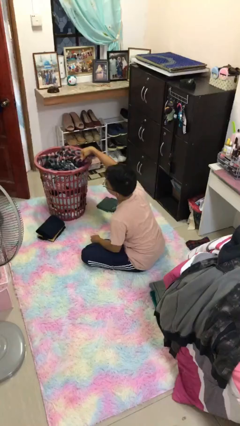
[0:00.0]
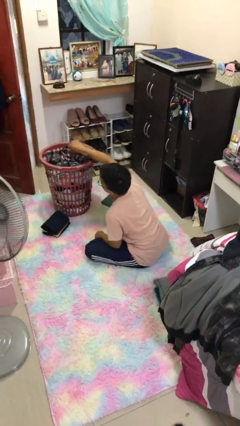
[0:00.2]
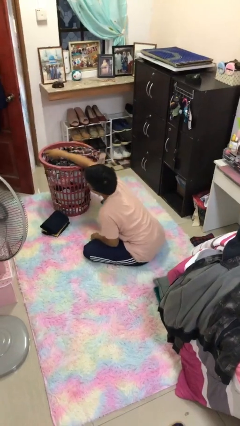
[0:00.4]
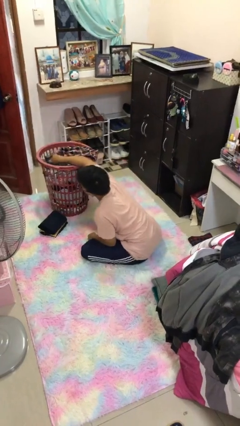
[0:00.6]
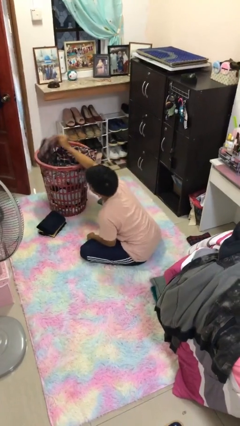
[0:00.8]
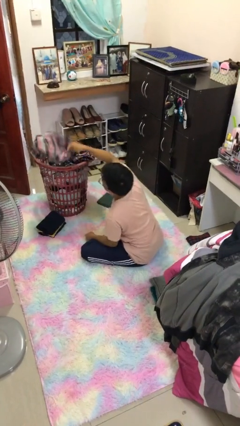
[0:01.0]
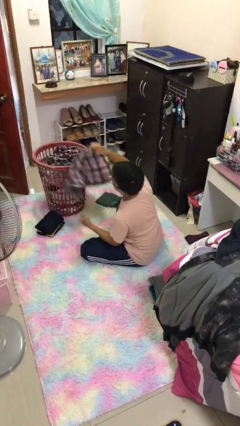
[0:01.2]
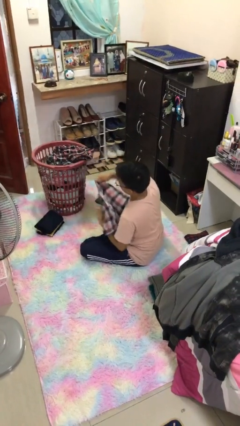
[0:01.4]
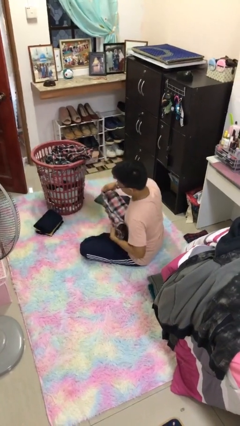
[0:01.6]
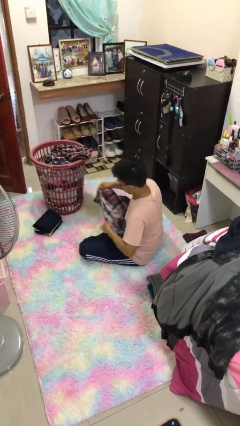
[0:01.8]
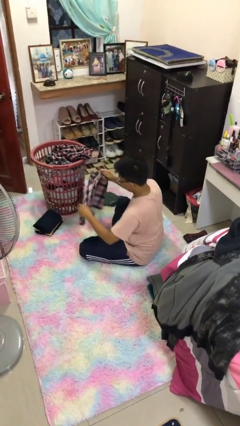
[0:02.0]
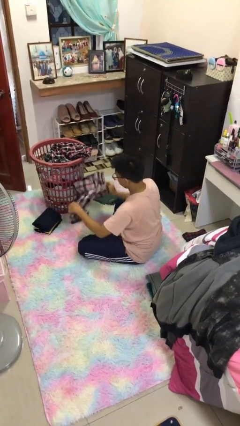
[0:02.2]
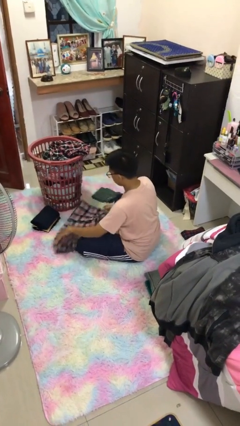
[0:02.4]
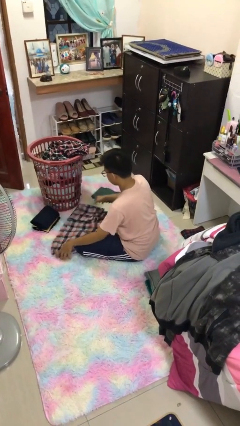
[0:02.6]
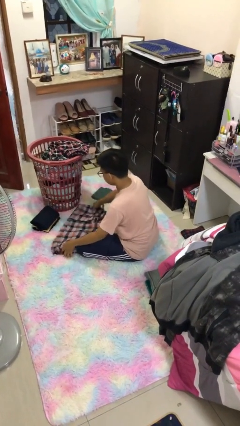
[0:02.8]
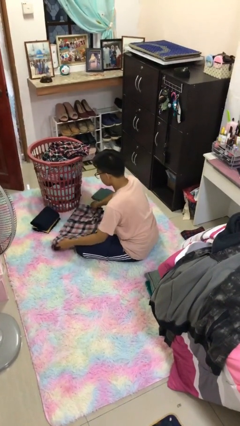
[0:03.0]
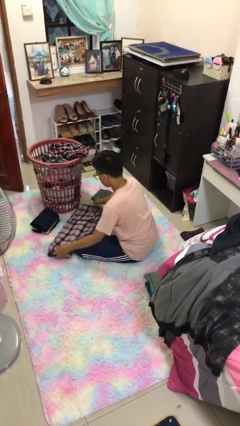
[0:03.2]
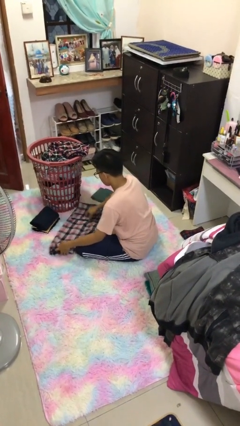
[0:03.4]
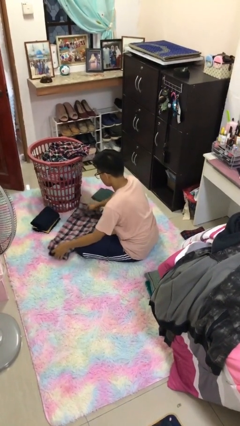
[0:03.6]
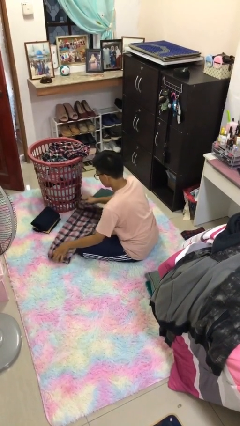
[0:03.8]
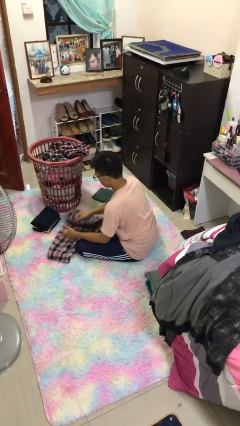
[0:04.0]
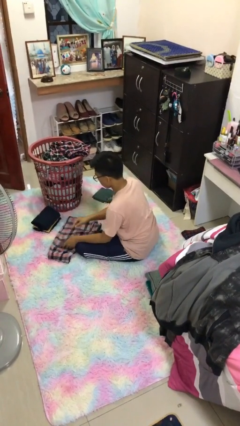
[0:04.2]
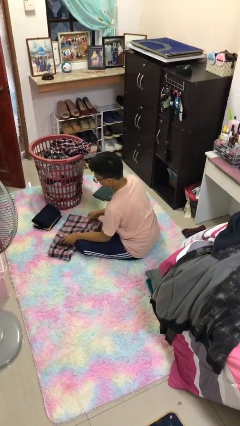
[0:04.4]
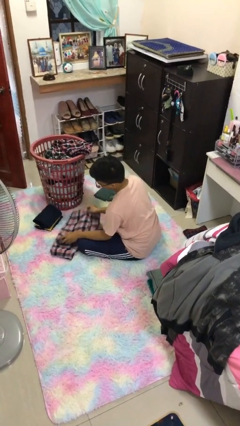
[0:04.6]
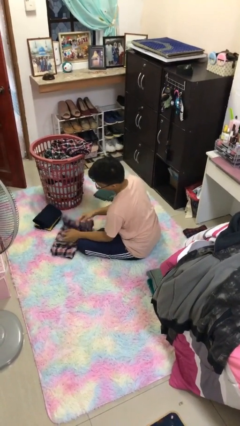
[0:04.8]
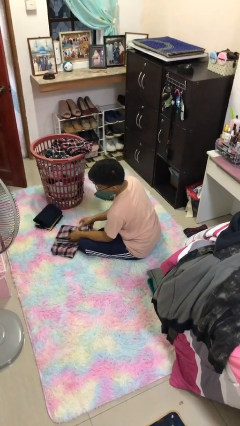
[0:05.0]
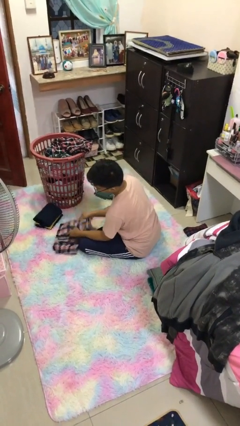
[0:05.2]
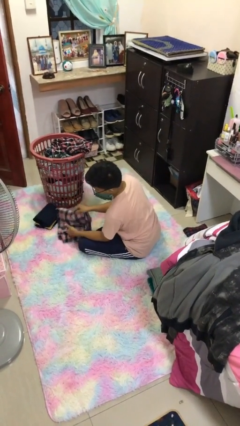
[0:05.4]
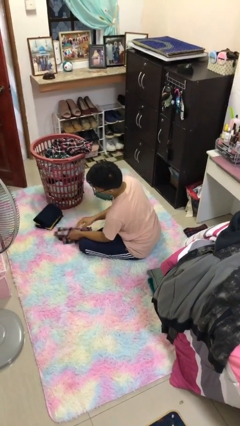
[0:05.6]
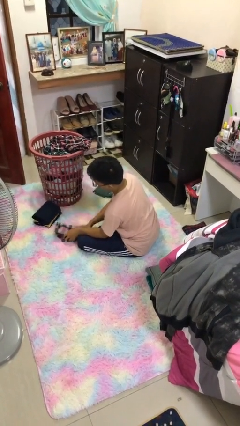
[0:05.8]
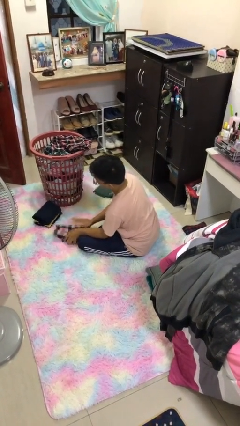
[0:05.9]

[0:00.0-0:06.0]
person folds pants

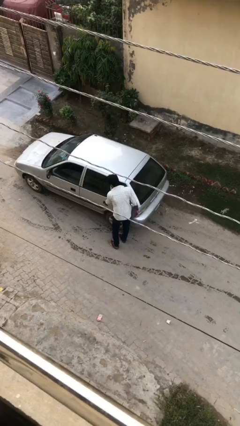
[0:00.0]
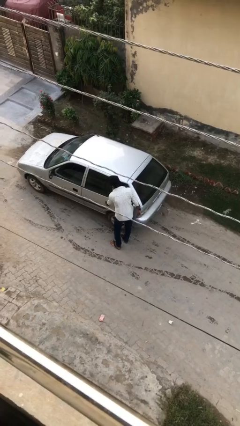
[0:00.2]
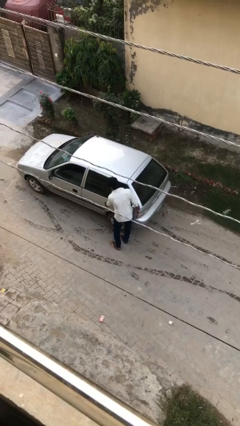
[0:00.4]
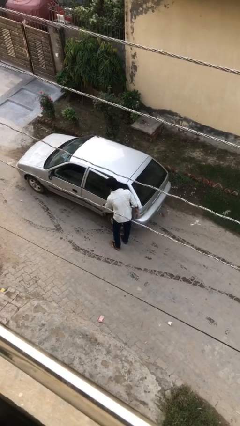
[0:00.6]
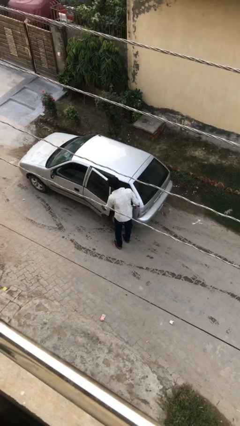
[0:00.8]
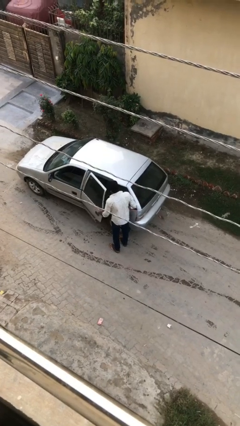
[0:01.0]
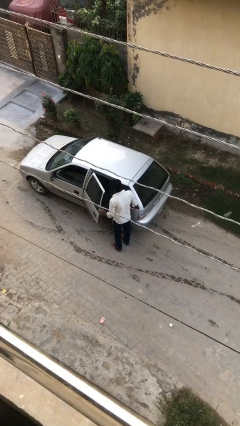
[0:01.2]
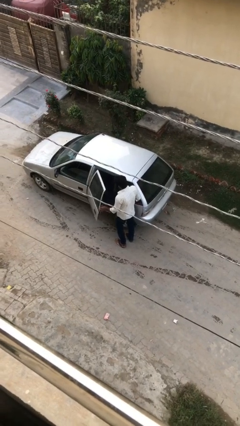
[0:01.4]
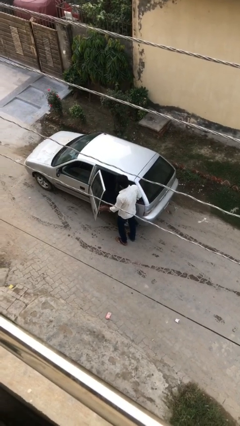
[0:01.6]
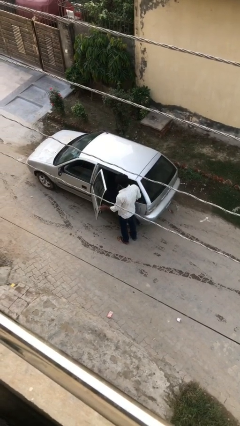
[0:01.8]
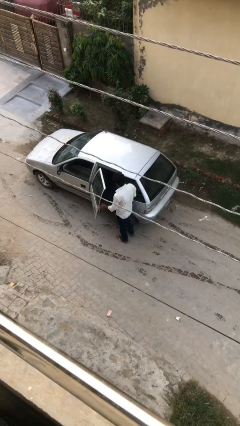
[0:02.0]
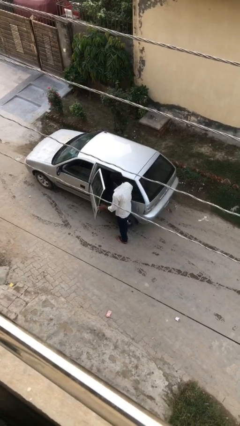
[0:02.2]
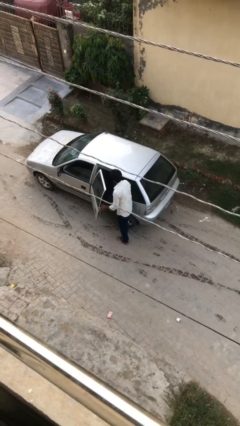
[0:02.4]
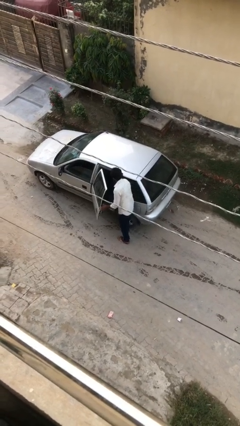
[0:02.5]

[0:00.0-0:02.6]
person opens car door

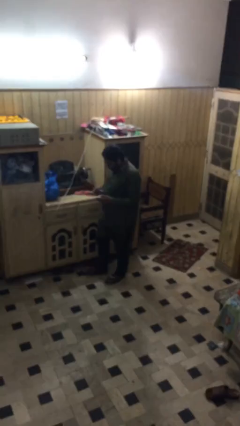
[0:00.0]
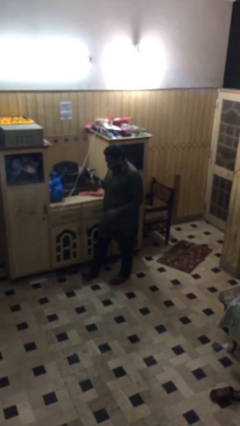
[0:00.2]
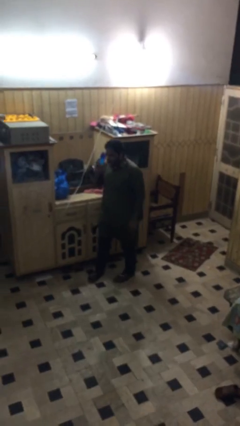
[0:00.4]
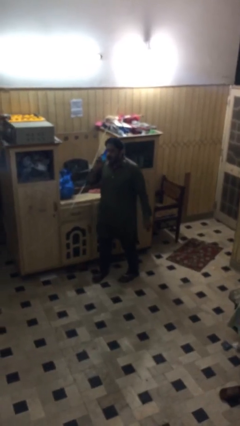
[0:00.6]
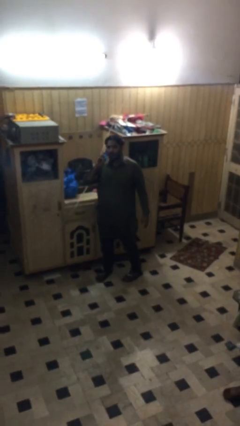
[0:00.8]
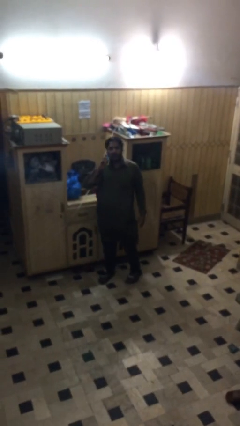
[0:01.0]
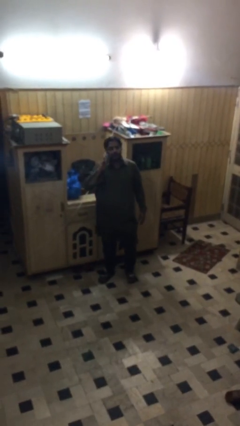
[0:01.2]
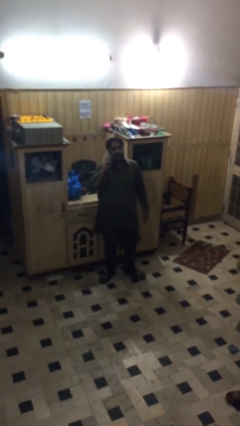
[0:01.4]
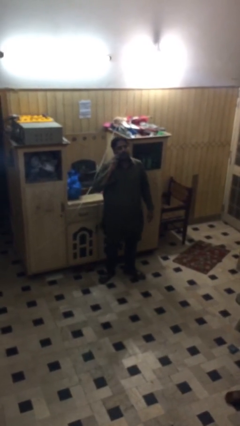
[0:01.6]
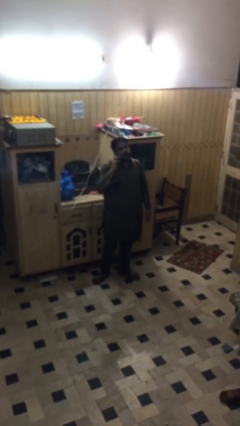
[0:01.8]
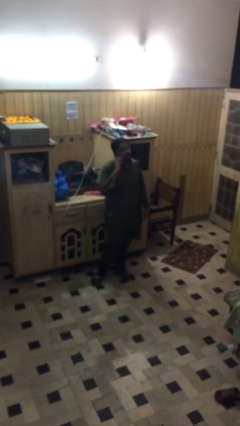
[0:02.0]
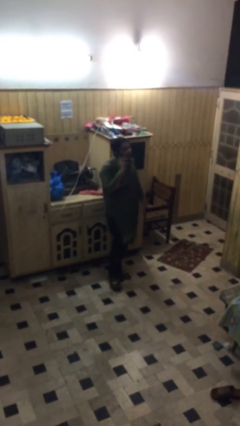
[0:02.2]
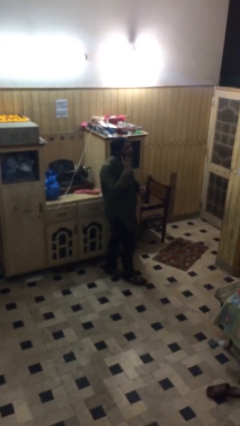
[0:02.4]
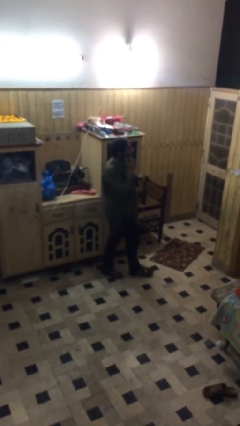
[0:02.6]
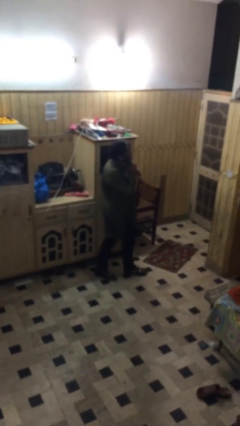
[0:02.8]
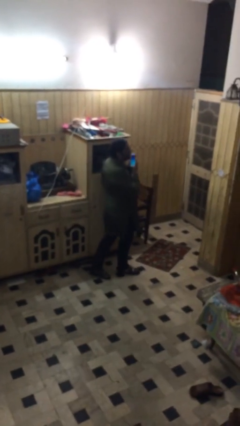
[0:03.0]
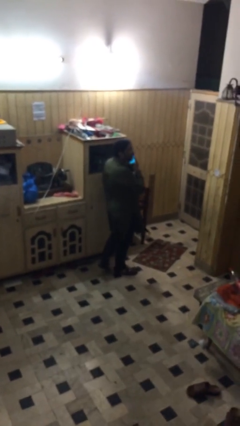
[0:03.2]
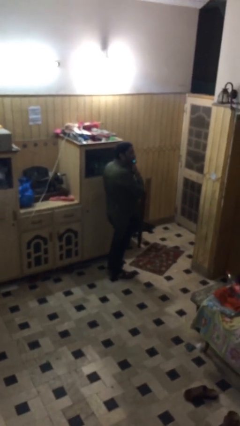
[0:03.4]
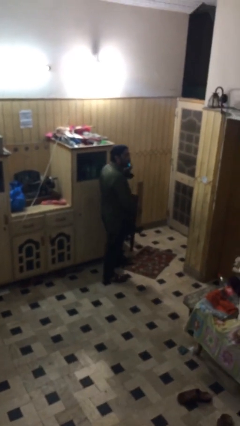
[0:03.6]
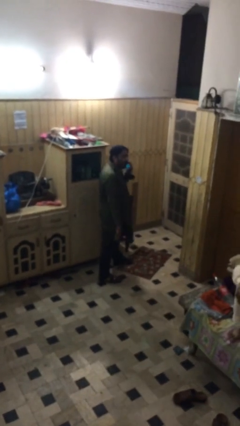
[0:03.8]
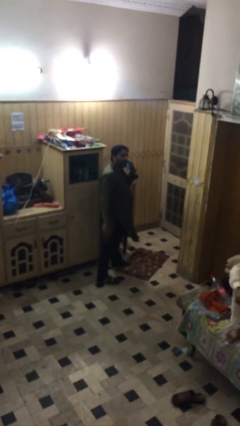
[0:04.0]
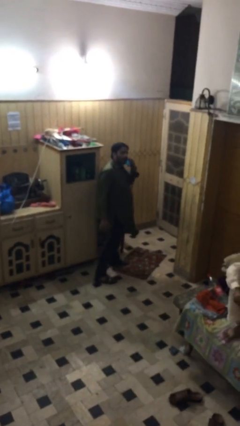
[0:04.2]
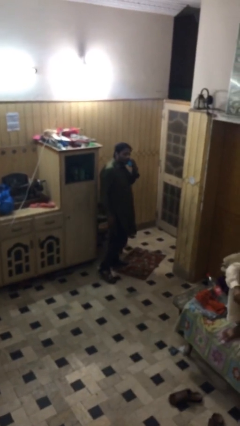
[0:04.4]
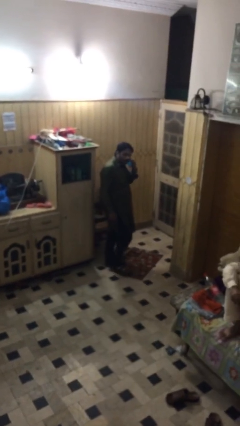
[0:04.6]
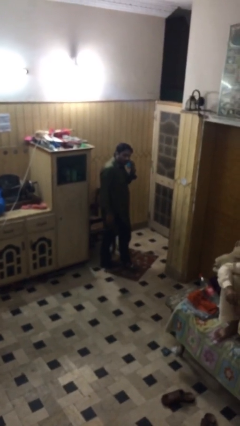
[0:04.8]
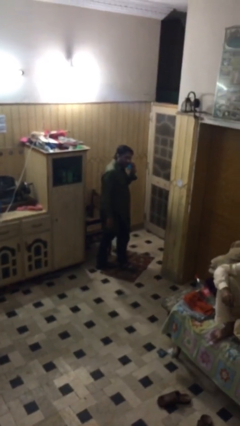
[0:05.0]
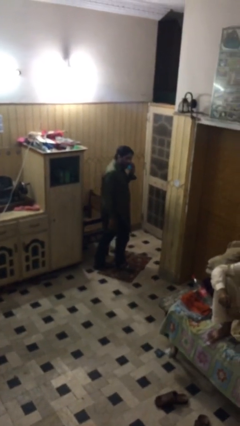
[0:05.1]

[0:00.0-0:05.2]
person talks on phone

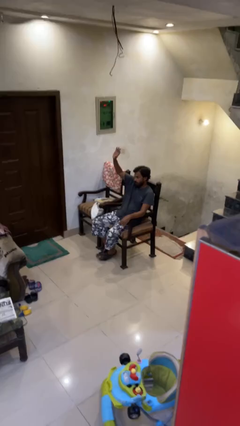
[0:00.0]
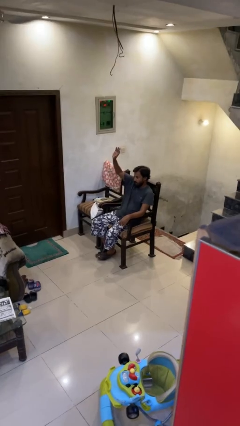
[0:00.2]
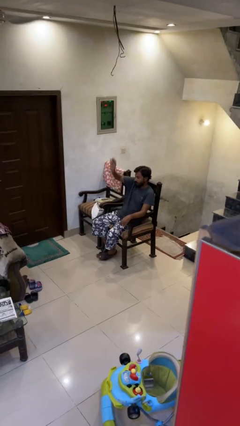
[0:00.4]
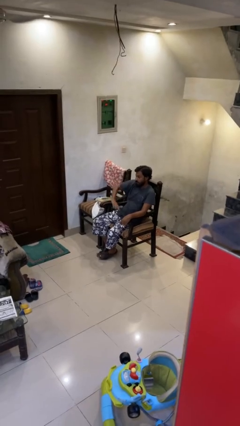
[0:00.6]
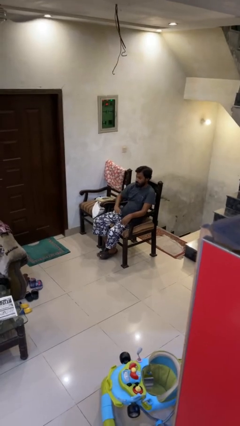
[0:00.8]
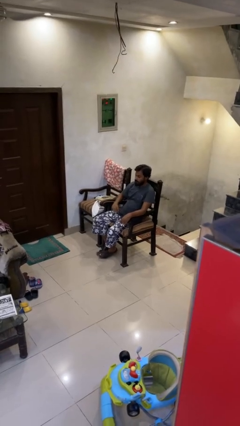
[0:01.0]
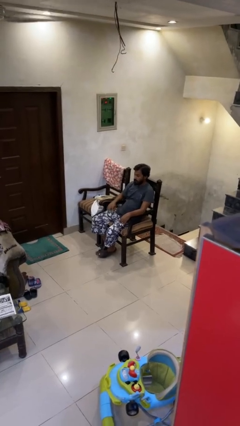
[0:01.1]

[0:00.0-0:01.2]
person gestures swipe down

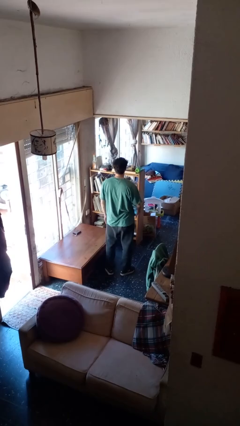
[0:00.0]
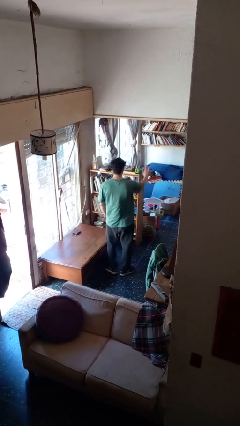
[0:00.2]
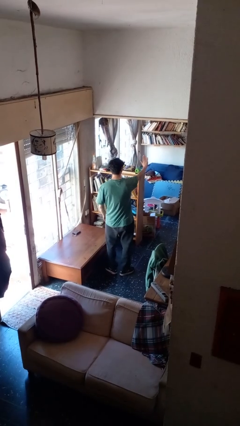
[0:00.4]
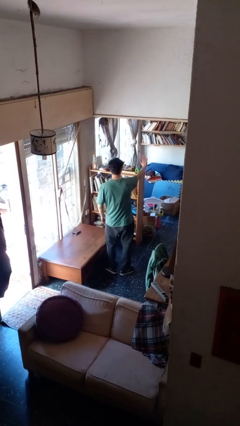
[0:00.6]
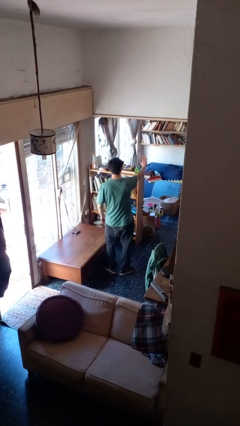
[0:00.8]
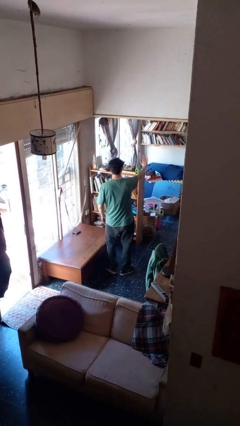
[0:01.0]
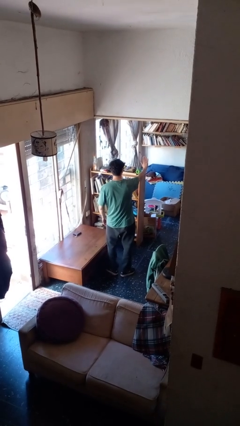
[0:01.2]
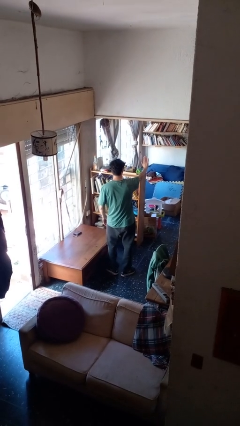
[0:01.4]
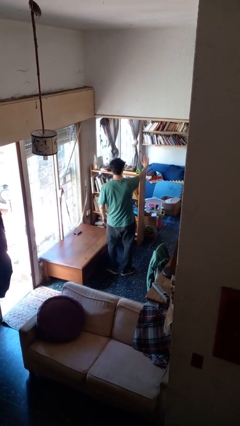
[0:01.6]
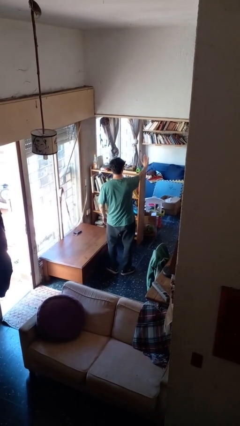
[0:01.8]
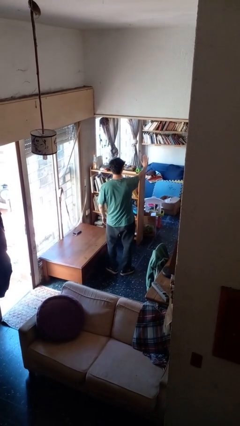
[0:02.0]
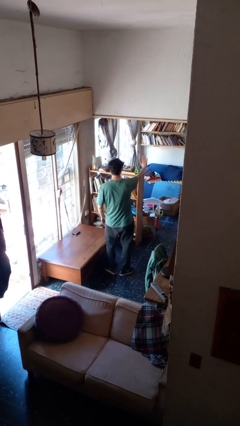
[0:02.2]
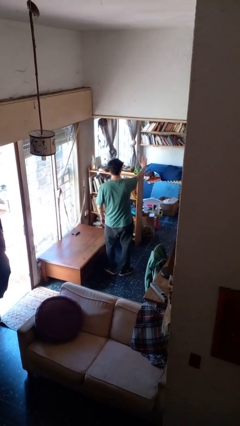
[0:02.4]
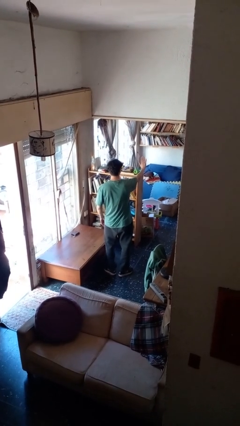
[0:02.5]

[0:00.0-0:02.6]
person gestures stop

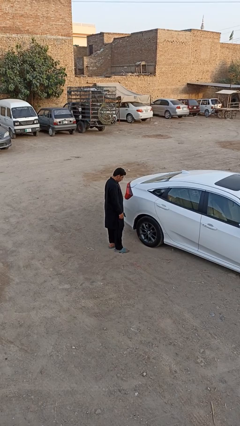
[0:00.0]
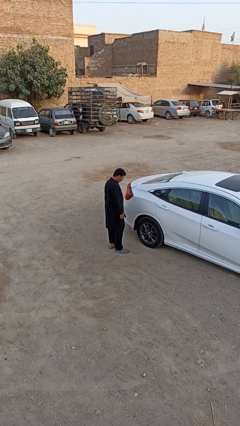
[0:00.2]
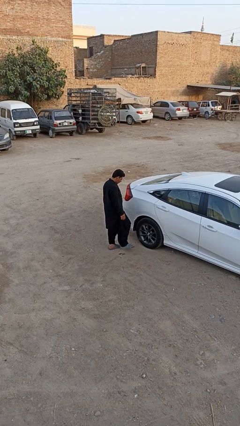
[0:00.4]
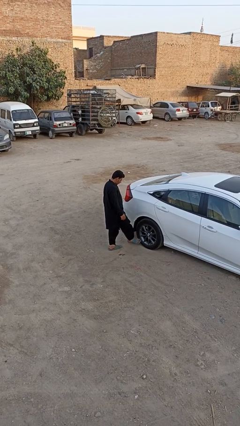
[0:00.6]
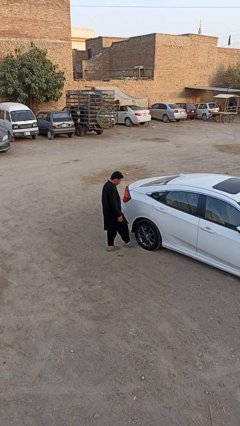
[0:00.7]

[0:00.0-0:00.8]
person kicks car tires
